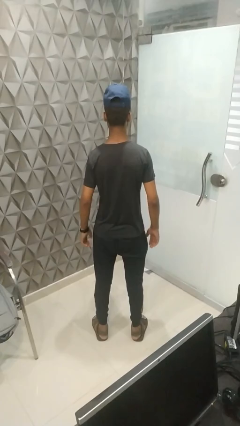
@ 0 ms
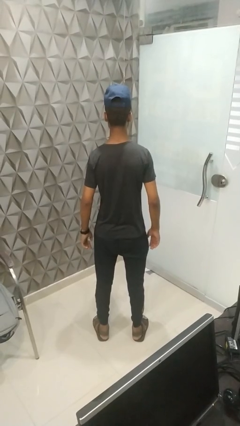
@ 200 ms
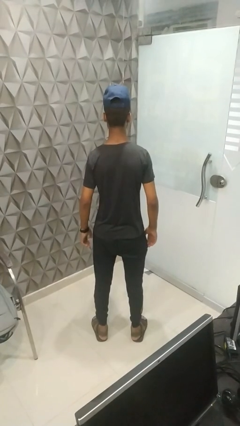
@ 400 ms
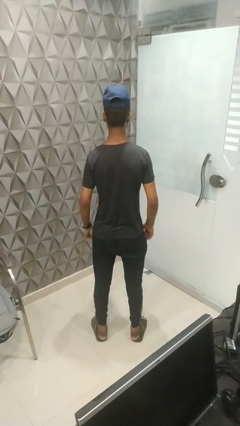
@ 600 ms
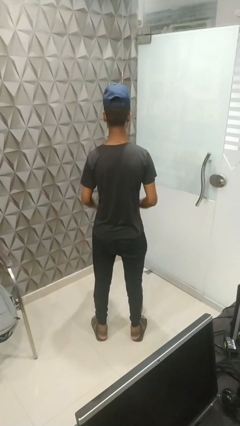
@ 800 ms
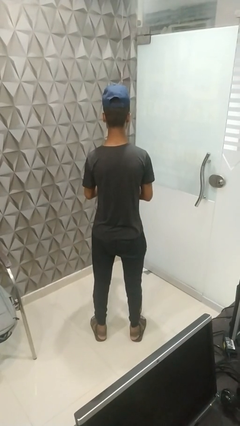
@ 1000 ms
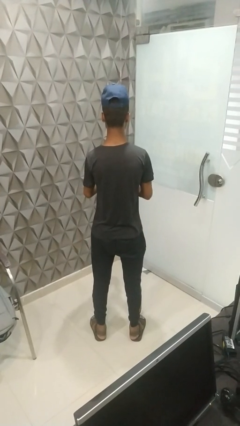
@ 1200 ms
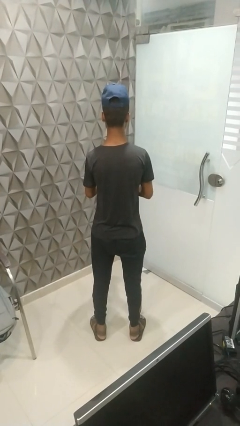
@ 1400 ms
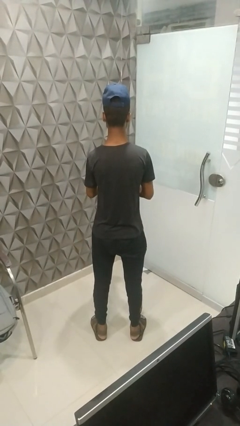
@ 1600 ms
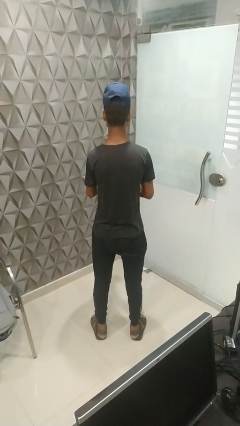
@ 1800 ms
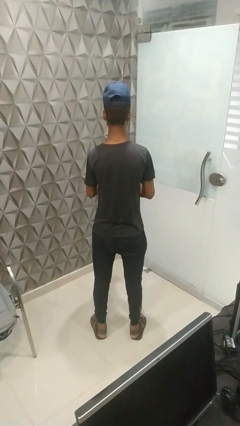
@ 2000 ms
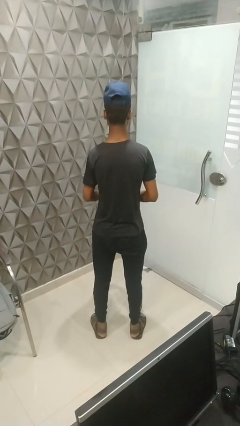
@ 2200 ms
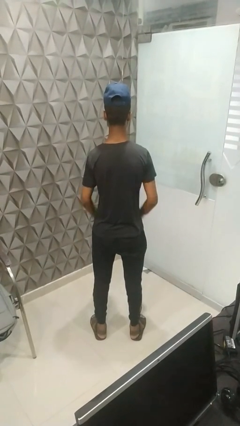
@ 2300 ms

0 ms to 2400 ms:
person claps hands

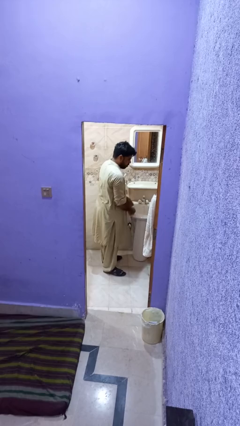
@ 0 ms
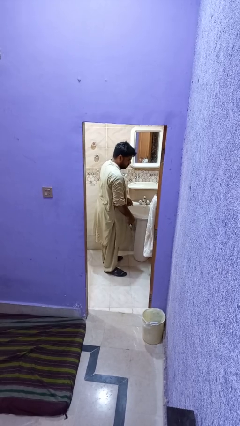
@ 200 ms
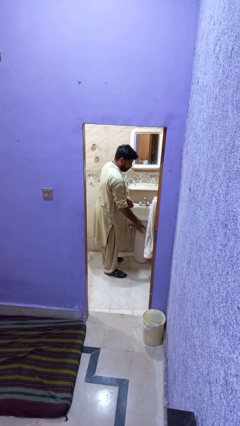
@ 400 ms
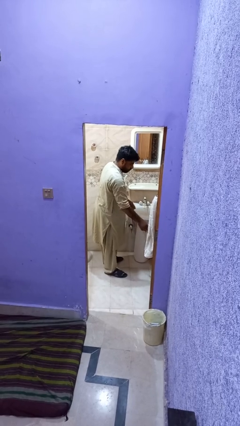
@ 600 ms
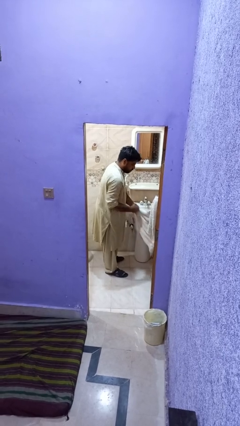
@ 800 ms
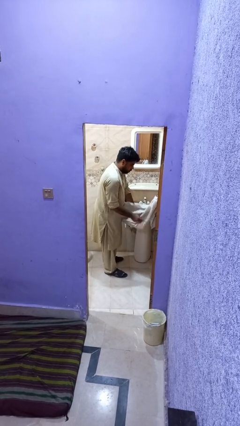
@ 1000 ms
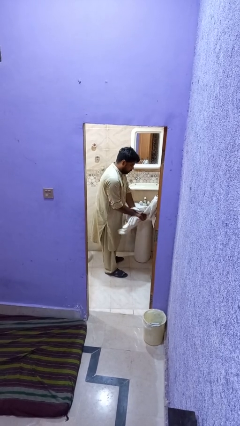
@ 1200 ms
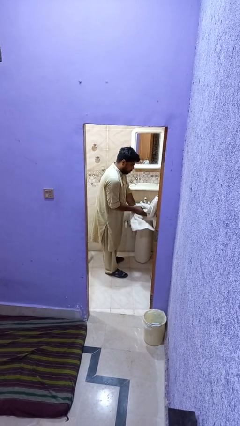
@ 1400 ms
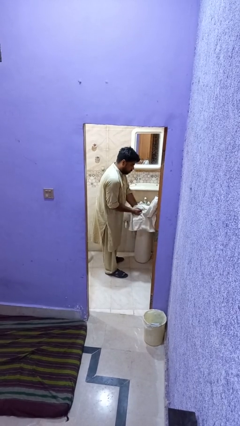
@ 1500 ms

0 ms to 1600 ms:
person dries hands with towel

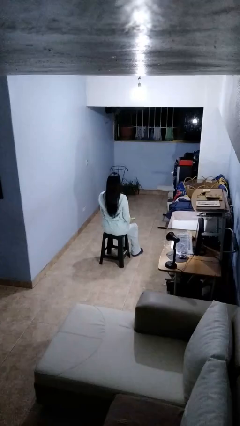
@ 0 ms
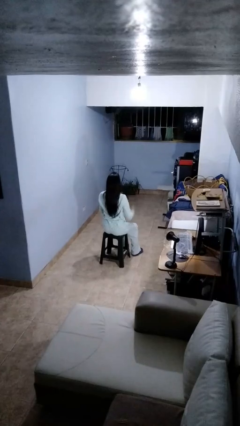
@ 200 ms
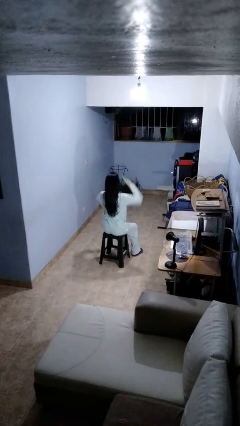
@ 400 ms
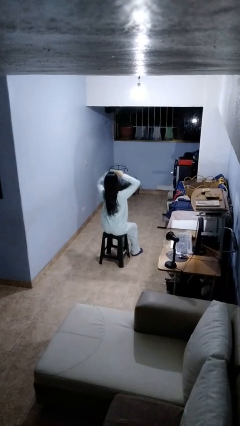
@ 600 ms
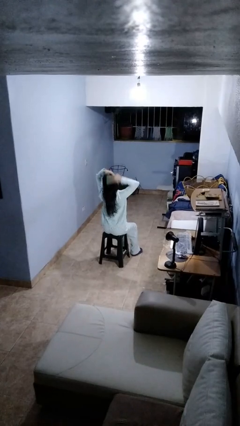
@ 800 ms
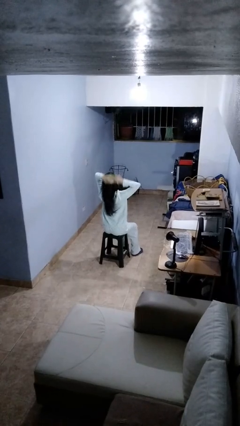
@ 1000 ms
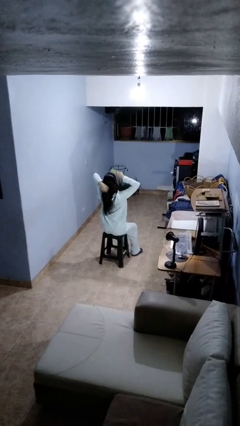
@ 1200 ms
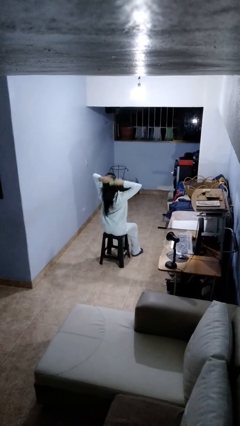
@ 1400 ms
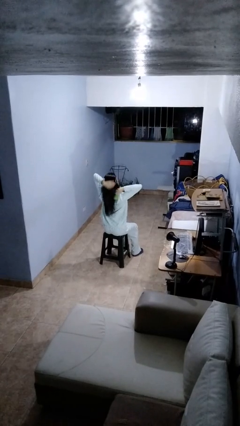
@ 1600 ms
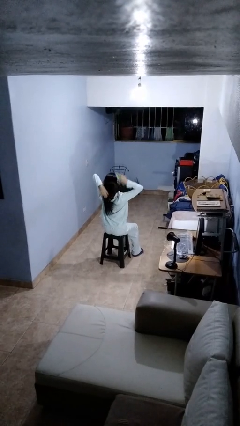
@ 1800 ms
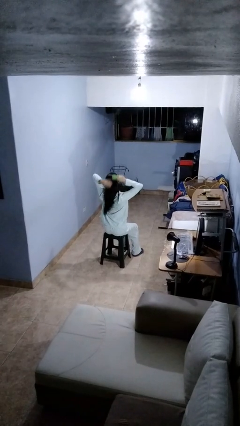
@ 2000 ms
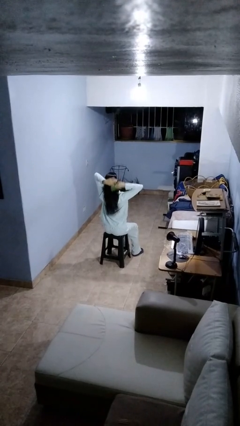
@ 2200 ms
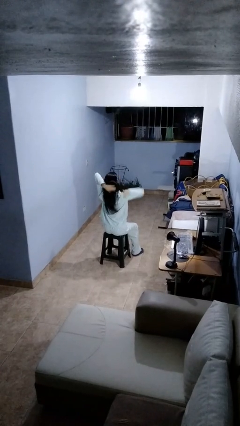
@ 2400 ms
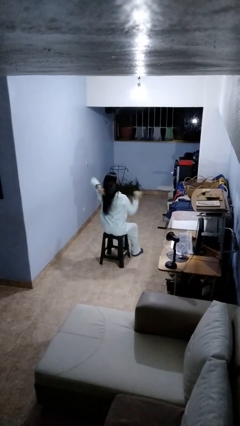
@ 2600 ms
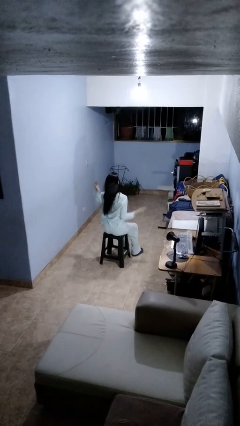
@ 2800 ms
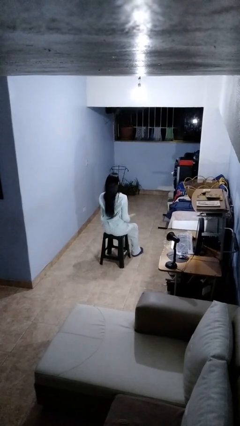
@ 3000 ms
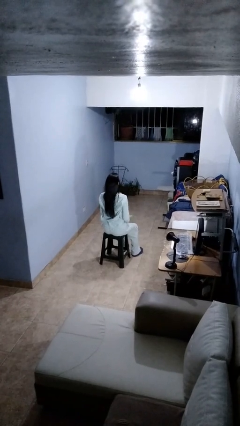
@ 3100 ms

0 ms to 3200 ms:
person brushes hair

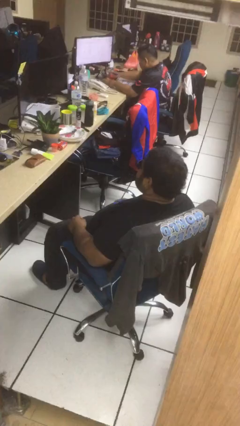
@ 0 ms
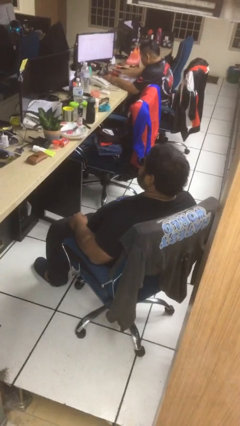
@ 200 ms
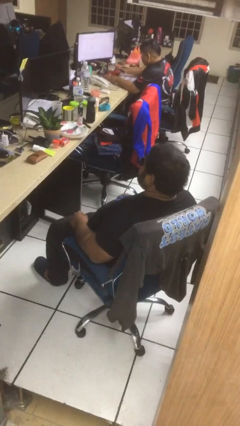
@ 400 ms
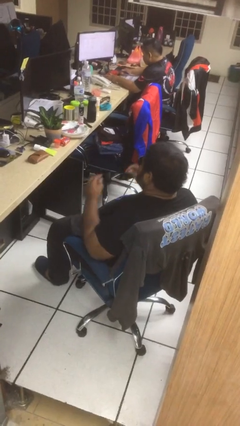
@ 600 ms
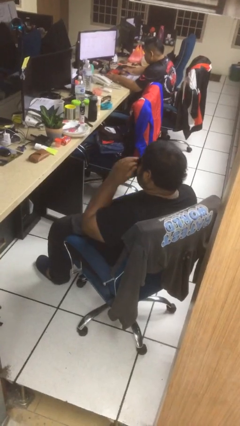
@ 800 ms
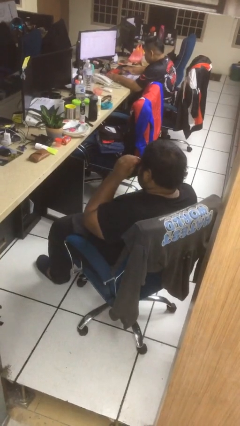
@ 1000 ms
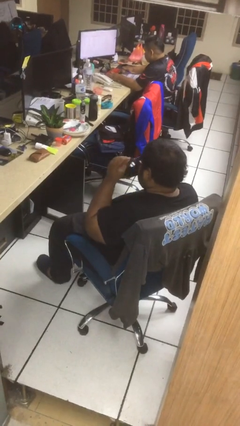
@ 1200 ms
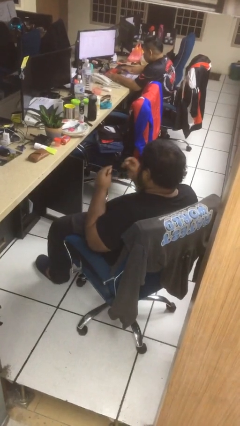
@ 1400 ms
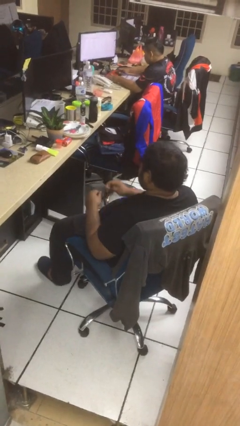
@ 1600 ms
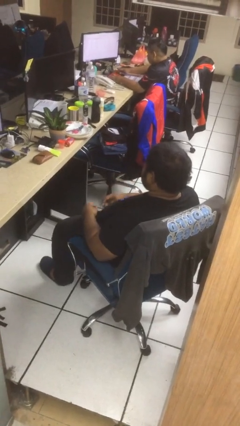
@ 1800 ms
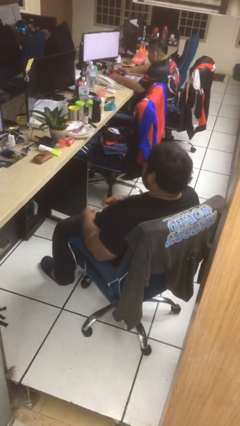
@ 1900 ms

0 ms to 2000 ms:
person takes off sunglasses

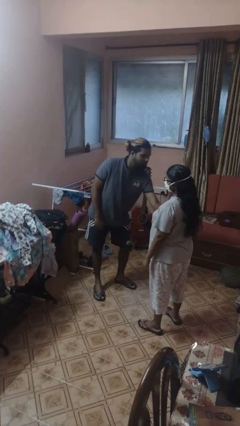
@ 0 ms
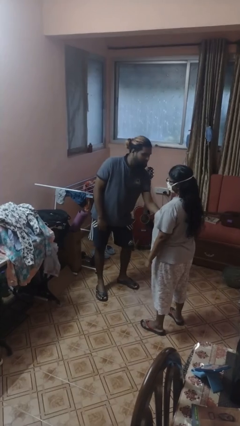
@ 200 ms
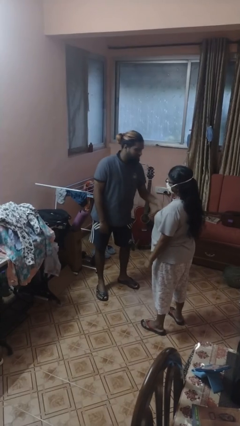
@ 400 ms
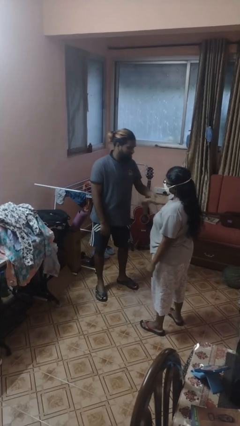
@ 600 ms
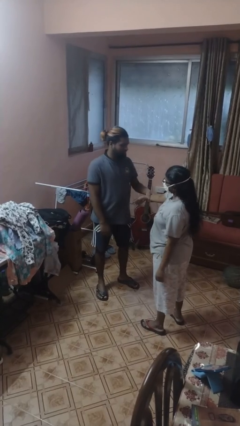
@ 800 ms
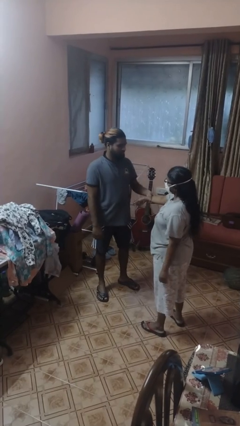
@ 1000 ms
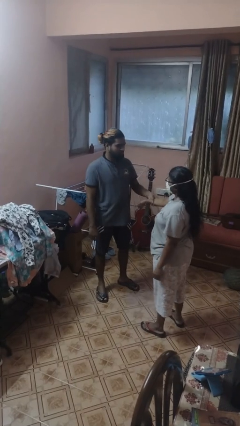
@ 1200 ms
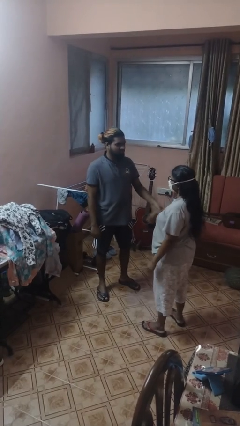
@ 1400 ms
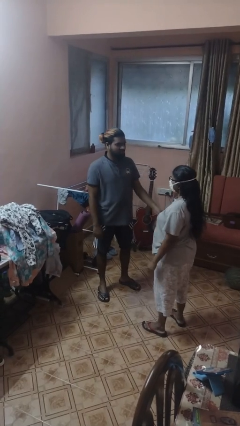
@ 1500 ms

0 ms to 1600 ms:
person grabs person by forearm

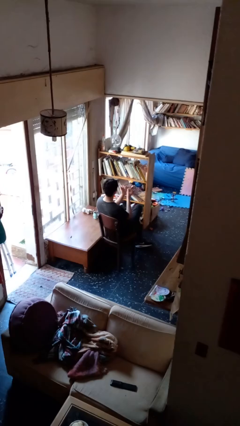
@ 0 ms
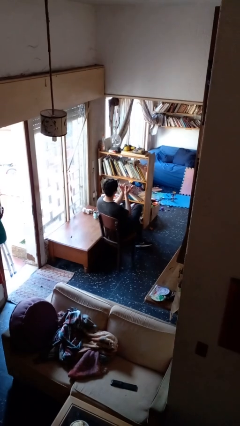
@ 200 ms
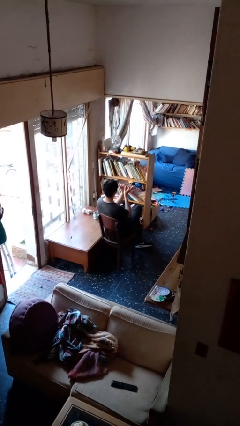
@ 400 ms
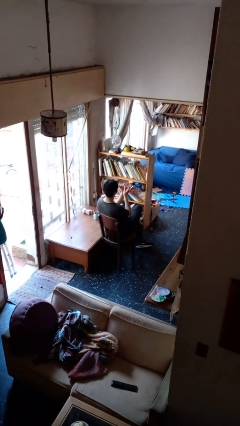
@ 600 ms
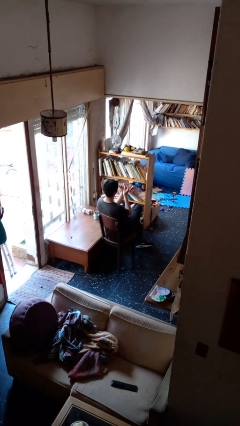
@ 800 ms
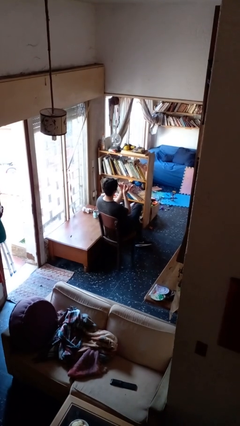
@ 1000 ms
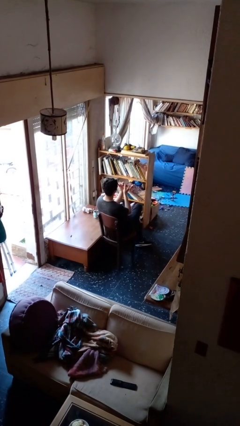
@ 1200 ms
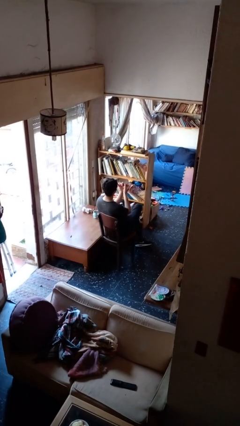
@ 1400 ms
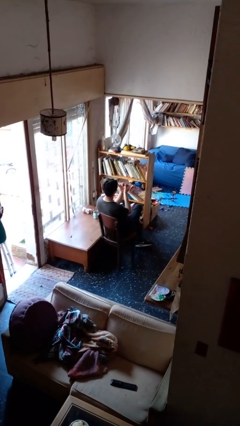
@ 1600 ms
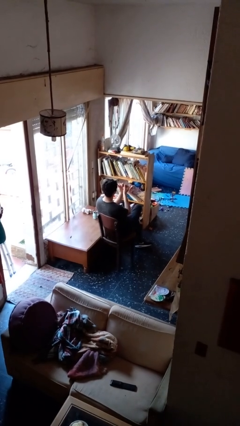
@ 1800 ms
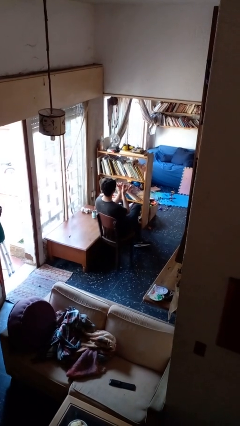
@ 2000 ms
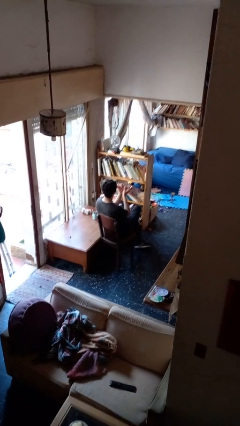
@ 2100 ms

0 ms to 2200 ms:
person files fingernails

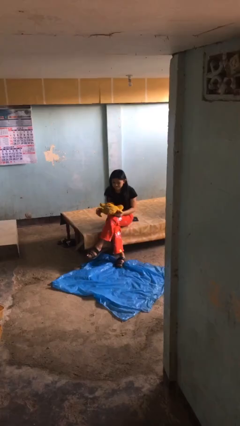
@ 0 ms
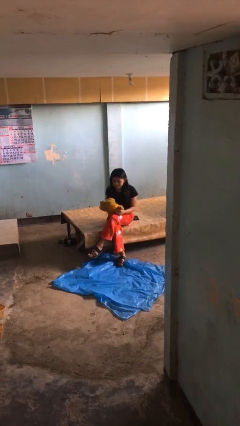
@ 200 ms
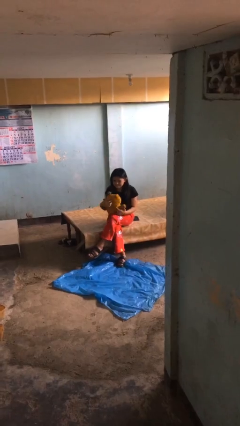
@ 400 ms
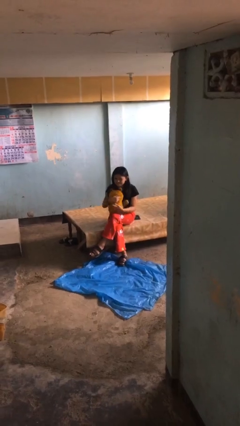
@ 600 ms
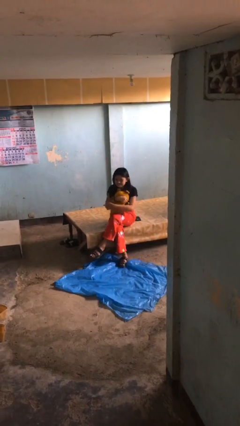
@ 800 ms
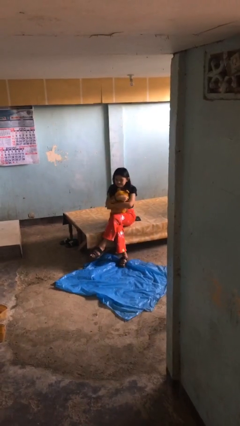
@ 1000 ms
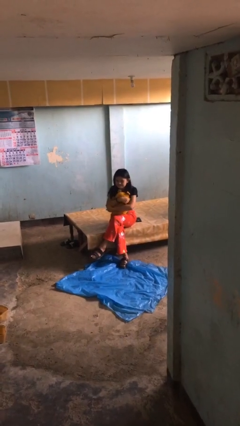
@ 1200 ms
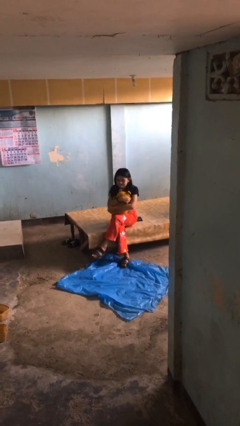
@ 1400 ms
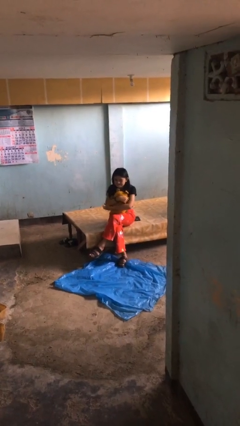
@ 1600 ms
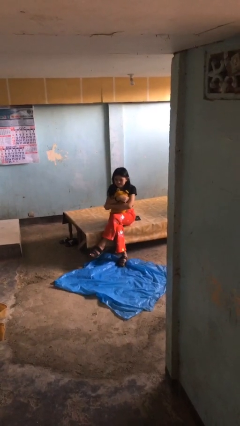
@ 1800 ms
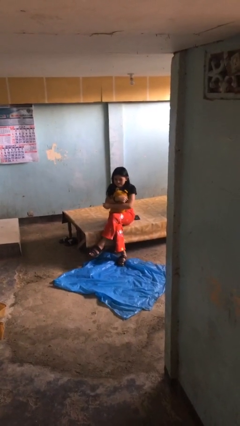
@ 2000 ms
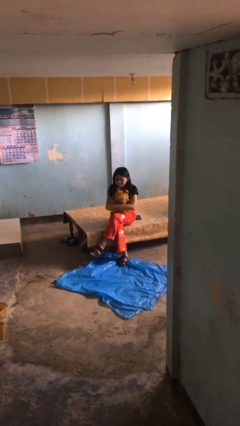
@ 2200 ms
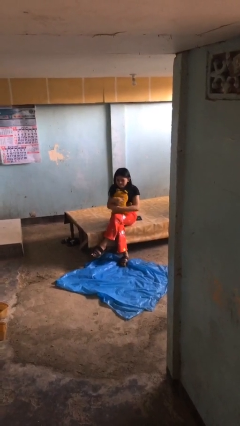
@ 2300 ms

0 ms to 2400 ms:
person hugs stuffed animal

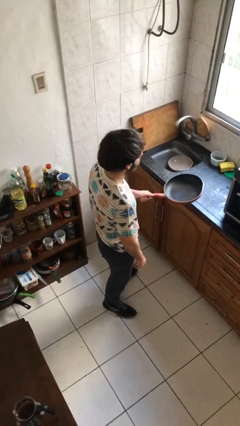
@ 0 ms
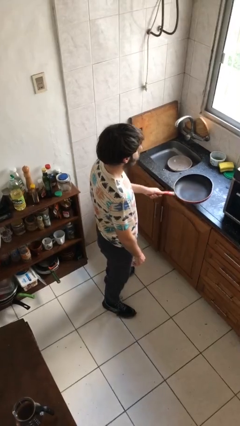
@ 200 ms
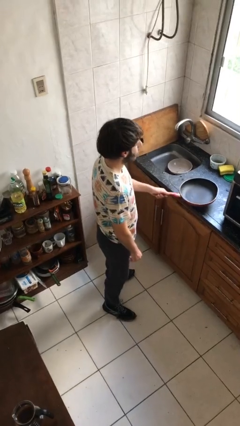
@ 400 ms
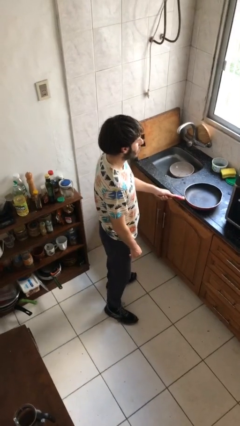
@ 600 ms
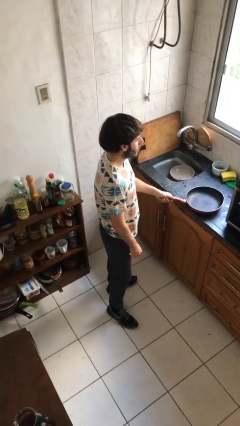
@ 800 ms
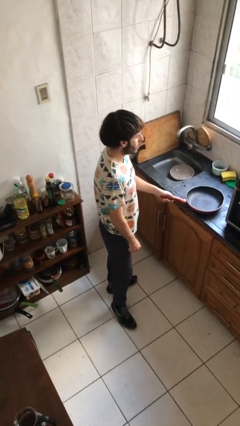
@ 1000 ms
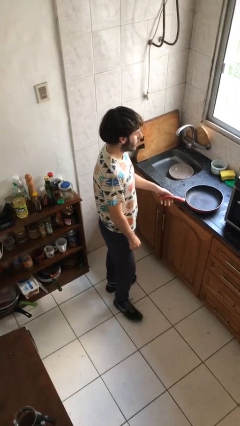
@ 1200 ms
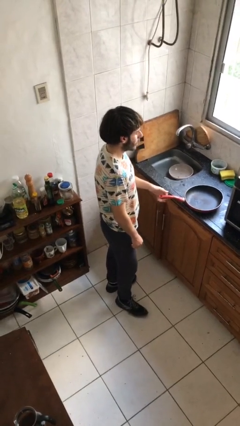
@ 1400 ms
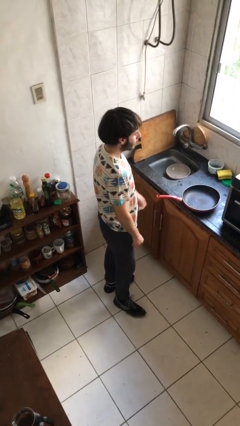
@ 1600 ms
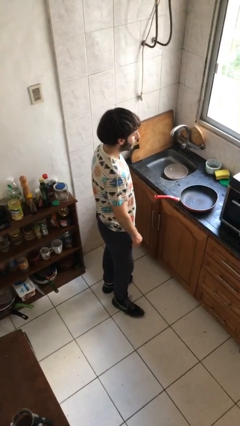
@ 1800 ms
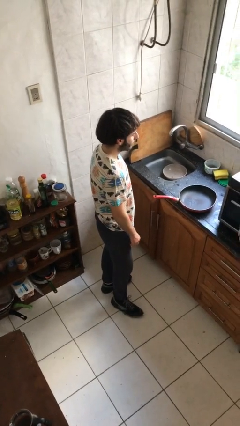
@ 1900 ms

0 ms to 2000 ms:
person puts down object on countertop
